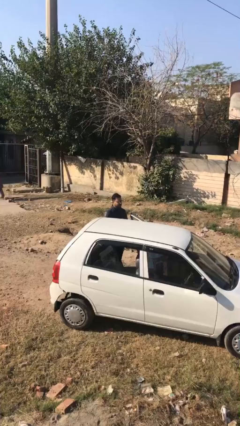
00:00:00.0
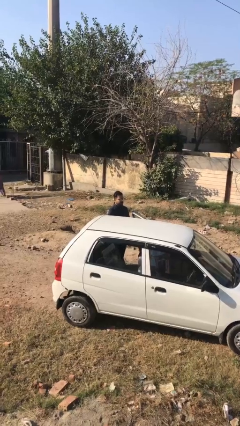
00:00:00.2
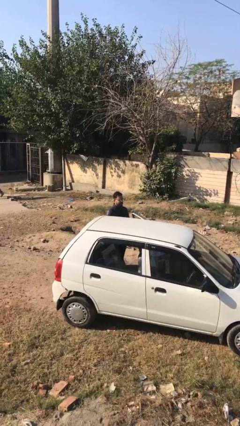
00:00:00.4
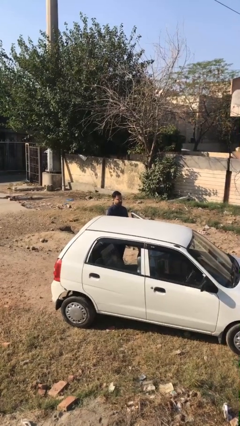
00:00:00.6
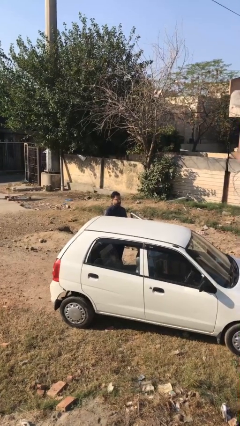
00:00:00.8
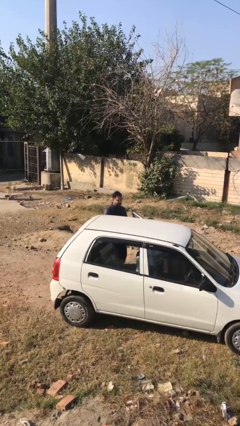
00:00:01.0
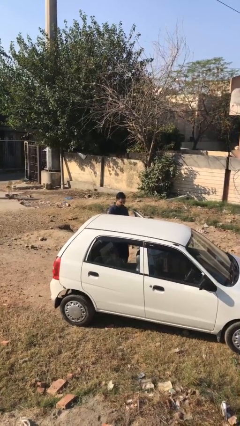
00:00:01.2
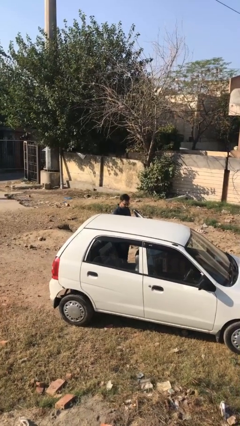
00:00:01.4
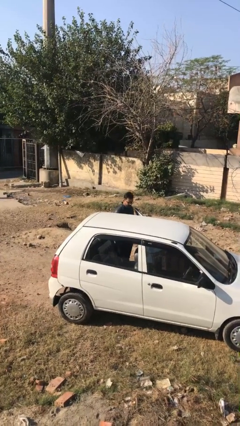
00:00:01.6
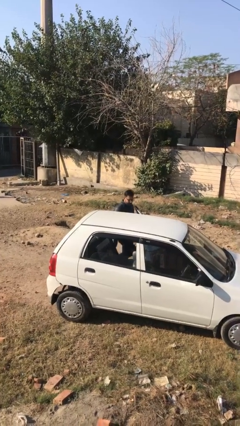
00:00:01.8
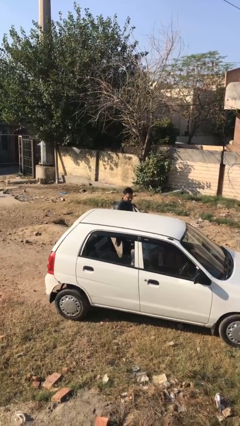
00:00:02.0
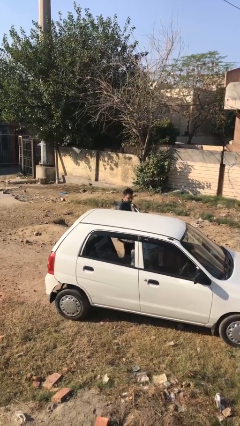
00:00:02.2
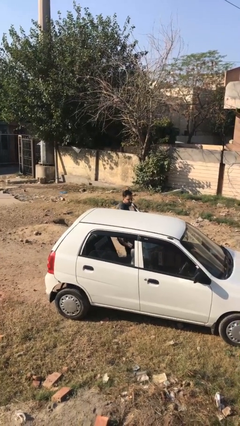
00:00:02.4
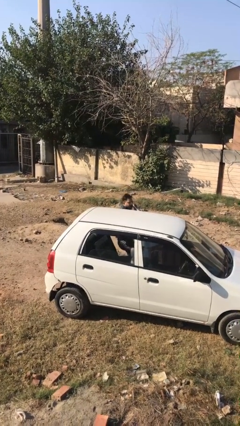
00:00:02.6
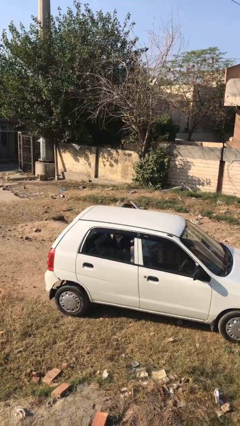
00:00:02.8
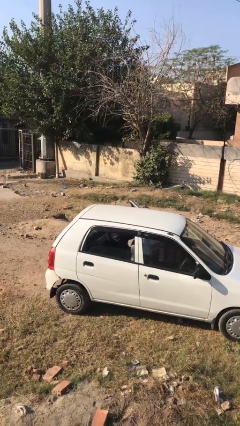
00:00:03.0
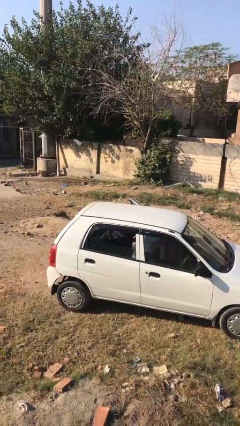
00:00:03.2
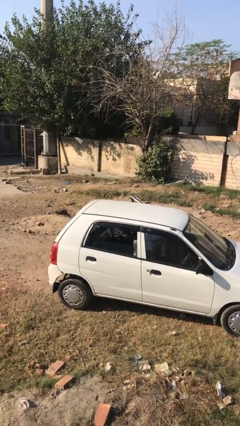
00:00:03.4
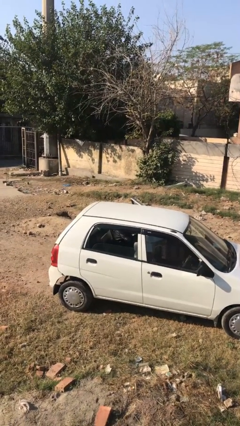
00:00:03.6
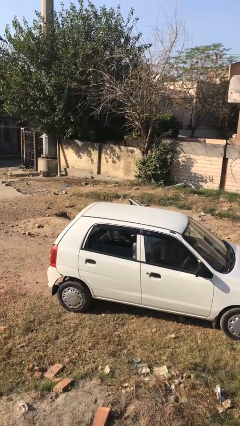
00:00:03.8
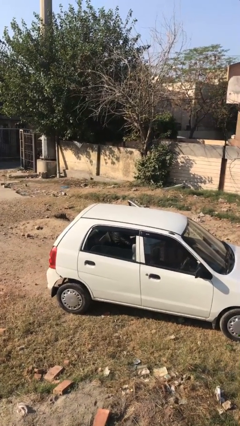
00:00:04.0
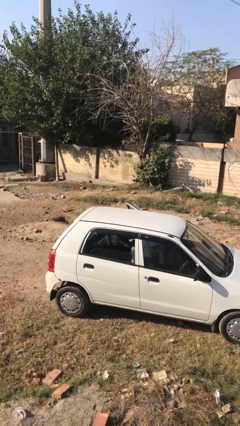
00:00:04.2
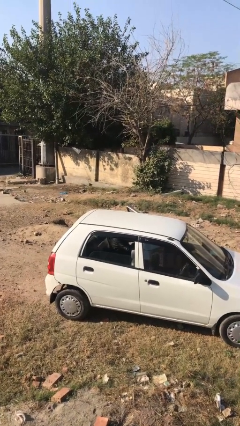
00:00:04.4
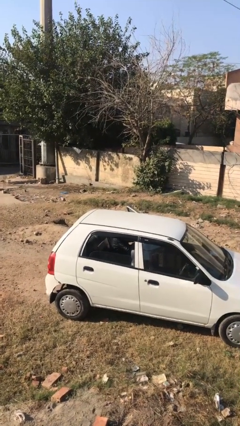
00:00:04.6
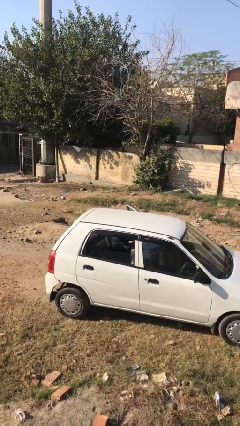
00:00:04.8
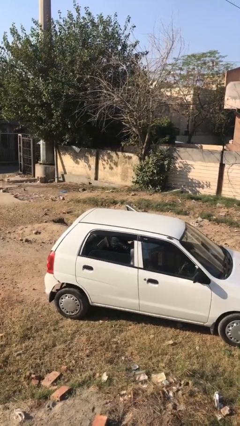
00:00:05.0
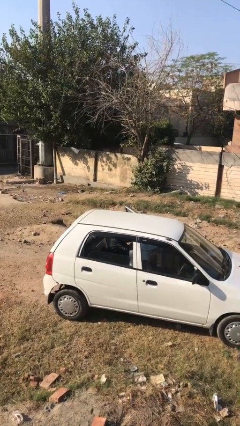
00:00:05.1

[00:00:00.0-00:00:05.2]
person enters car

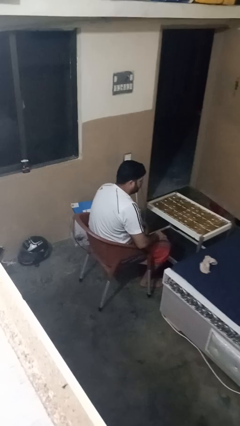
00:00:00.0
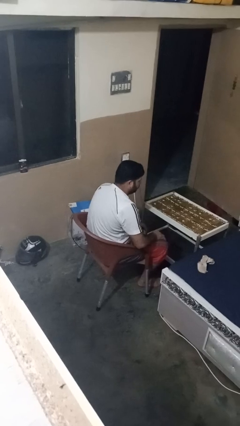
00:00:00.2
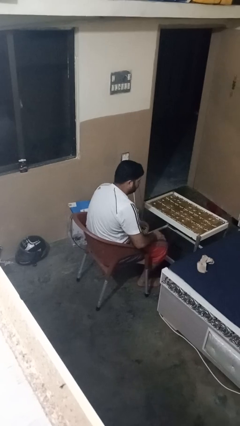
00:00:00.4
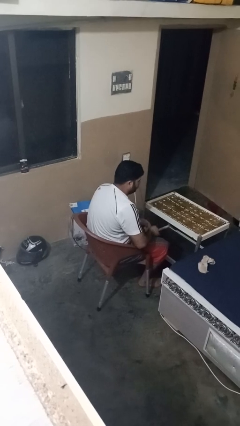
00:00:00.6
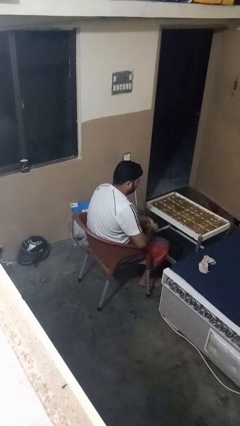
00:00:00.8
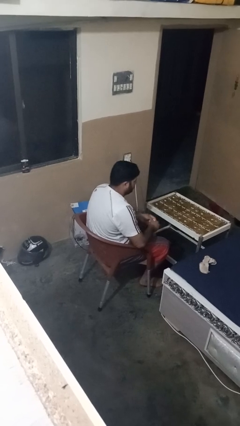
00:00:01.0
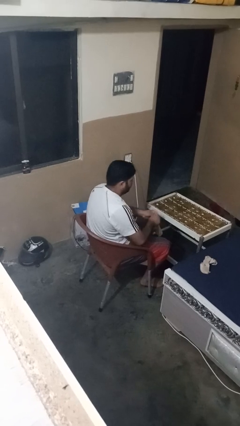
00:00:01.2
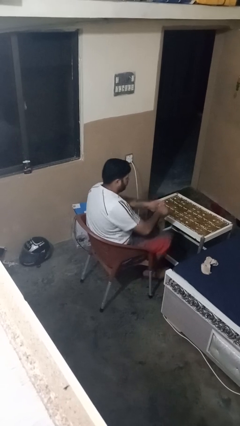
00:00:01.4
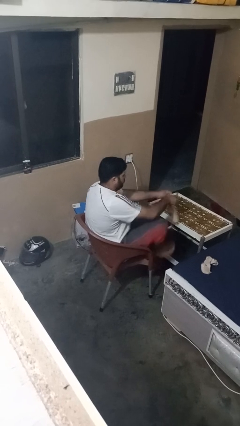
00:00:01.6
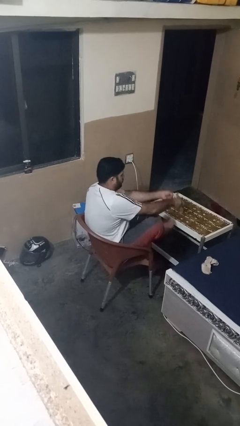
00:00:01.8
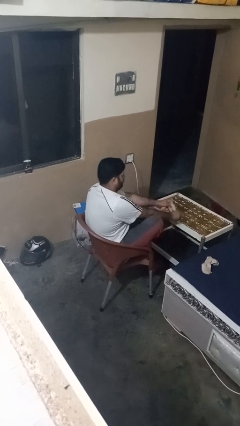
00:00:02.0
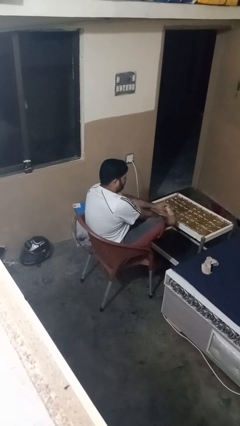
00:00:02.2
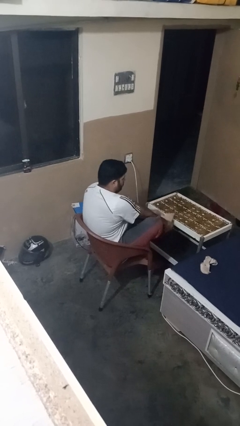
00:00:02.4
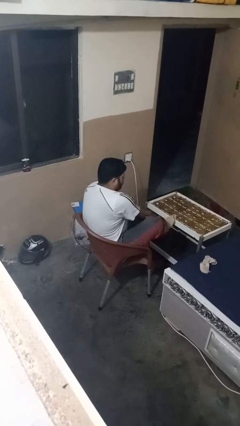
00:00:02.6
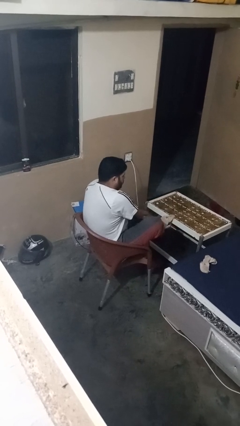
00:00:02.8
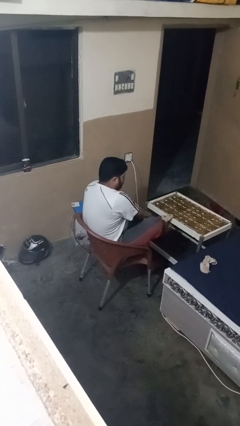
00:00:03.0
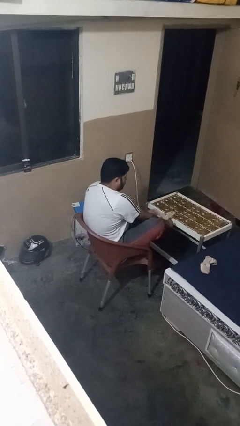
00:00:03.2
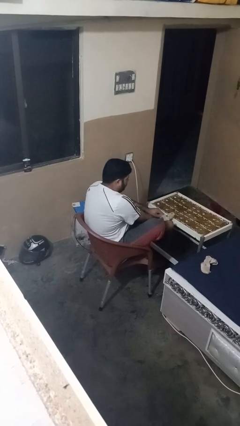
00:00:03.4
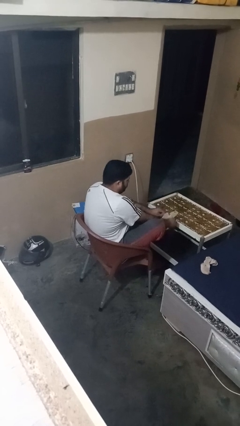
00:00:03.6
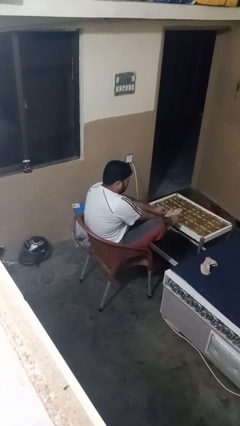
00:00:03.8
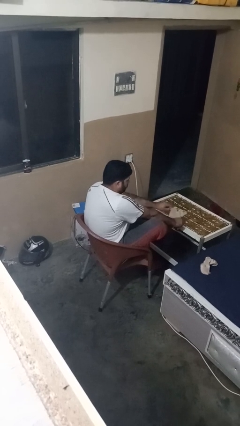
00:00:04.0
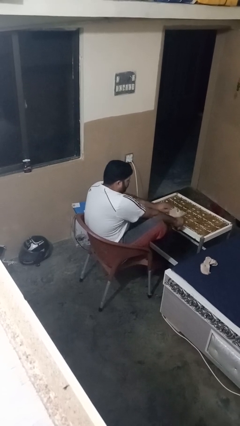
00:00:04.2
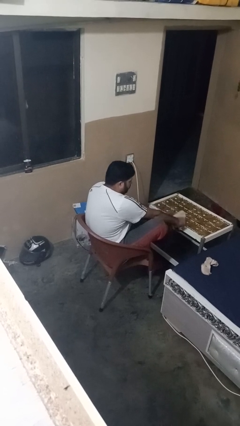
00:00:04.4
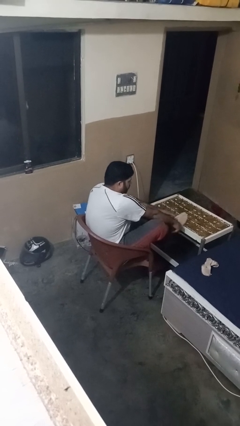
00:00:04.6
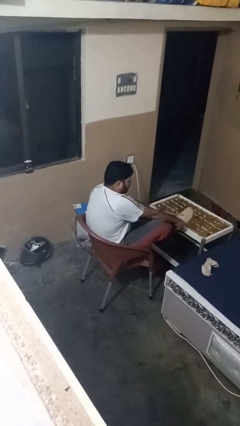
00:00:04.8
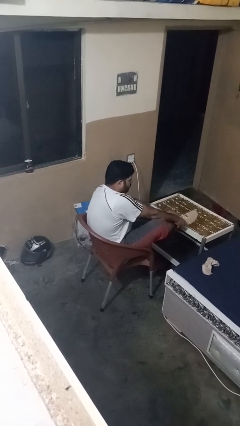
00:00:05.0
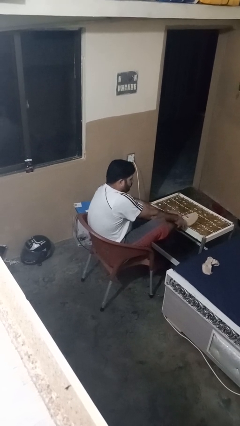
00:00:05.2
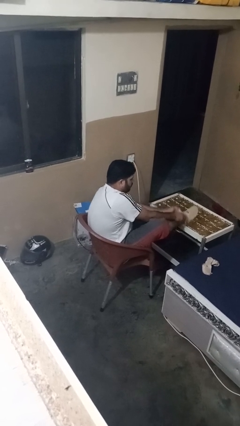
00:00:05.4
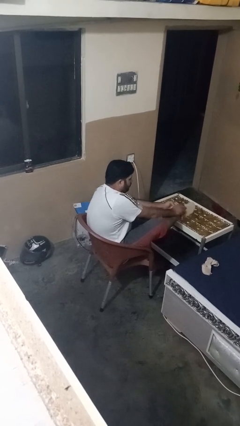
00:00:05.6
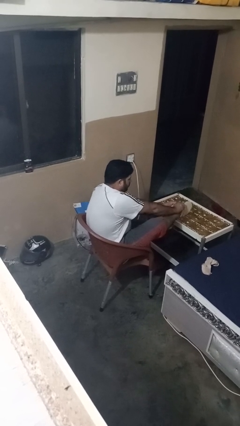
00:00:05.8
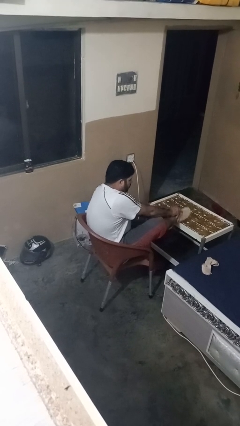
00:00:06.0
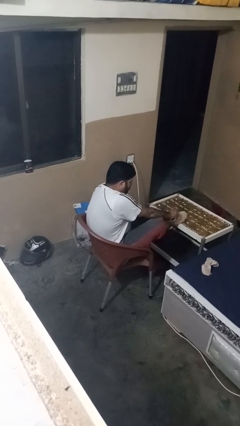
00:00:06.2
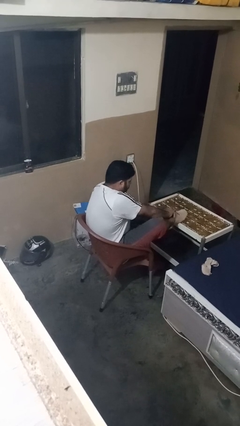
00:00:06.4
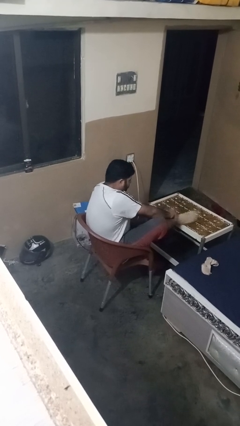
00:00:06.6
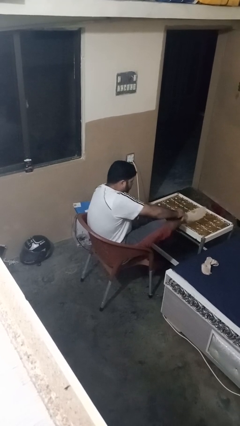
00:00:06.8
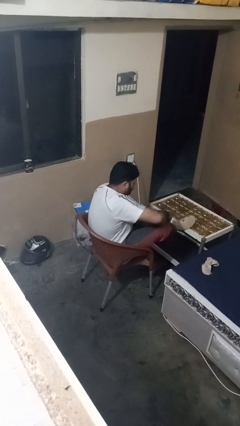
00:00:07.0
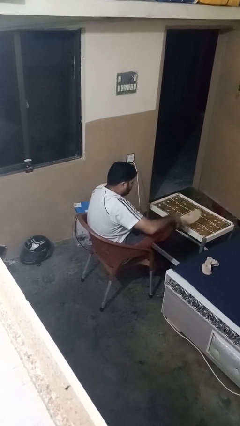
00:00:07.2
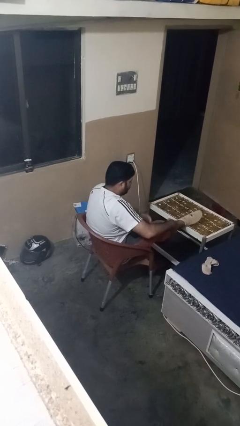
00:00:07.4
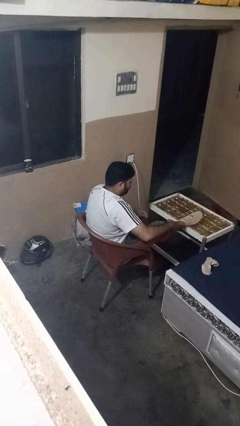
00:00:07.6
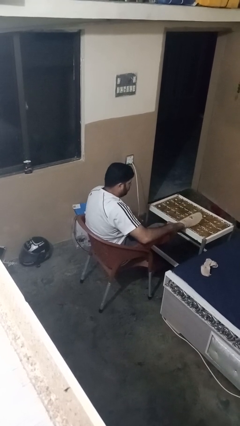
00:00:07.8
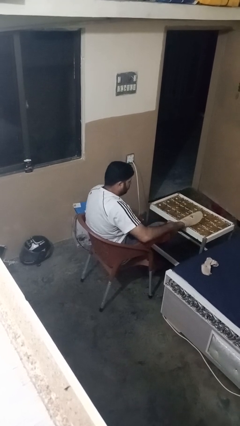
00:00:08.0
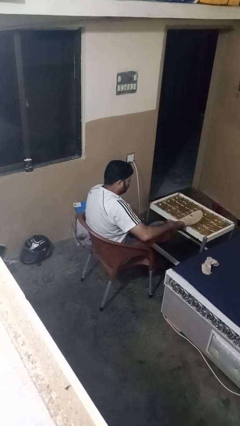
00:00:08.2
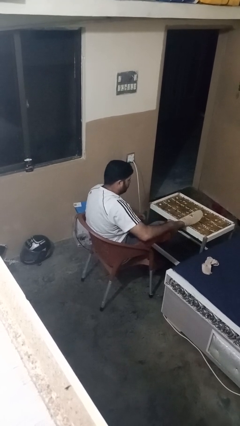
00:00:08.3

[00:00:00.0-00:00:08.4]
person puts on socks

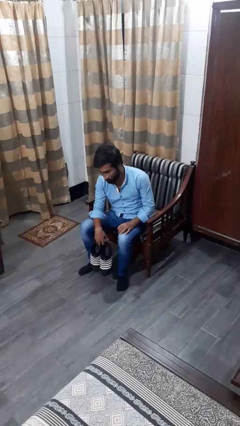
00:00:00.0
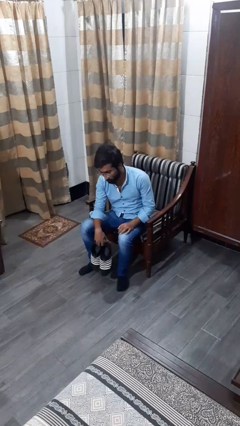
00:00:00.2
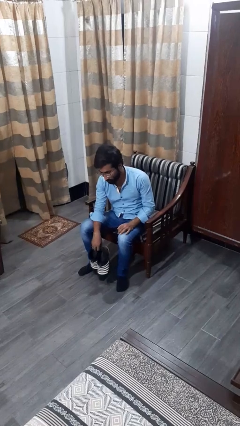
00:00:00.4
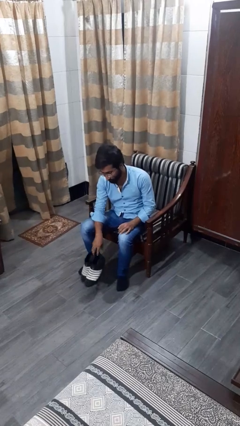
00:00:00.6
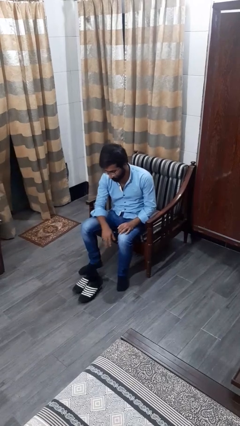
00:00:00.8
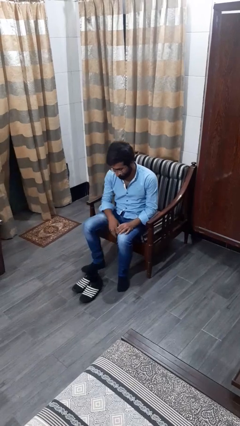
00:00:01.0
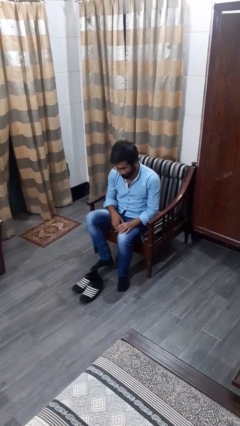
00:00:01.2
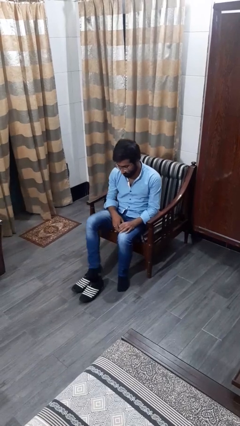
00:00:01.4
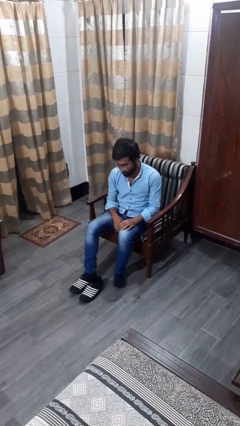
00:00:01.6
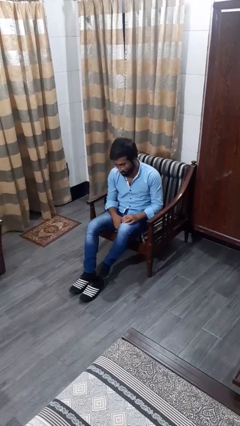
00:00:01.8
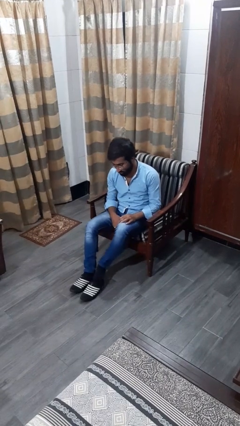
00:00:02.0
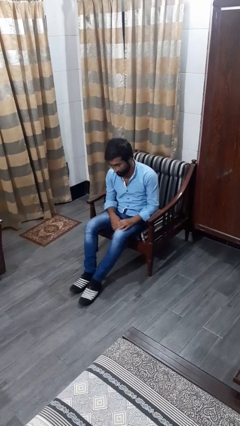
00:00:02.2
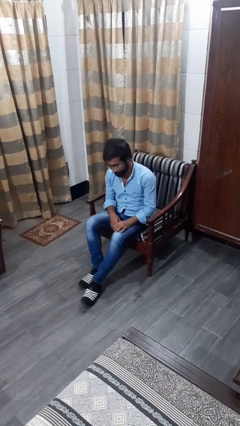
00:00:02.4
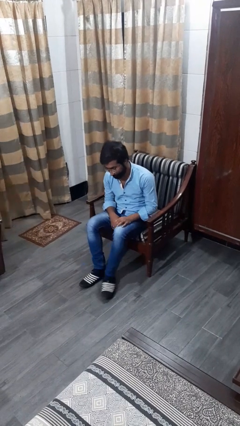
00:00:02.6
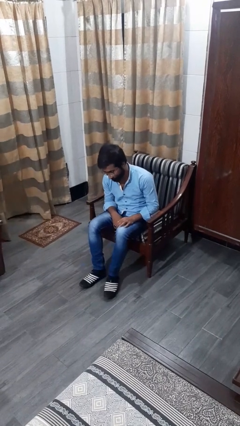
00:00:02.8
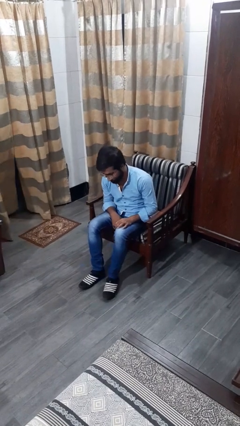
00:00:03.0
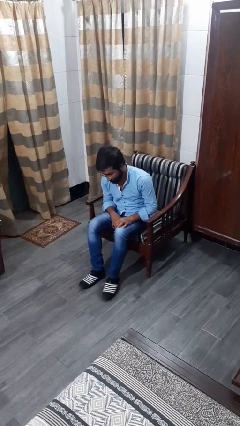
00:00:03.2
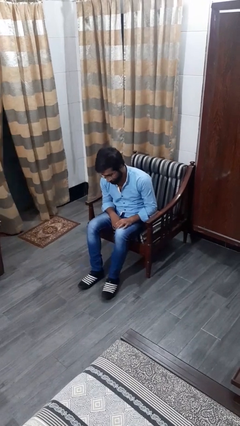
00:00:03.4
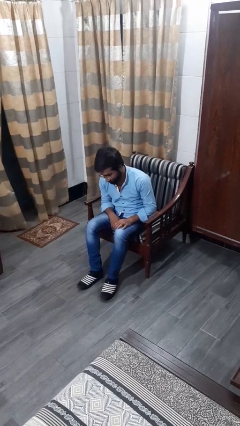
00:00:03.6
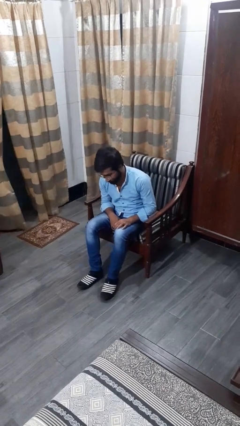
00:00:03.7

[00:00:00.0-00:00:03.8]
person puts on shoes
